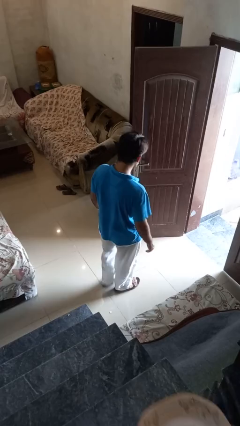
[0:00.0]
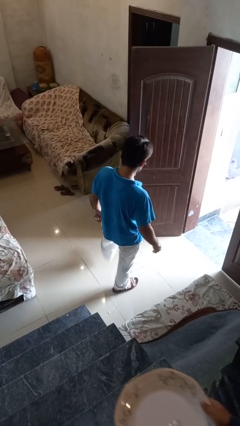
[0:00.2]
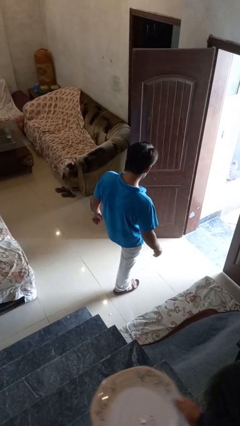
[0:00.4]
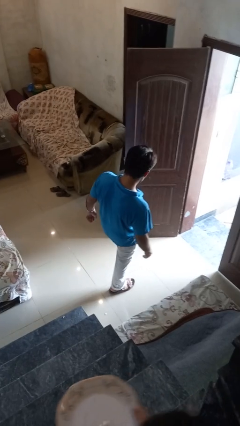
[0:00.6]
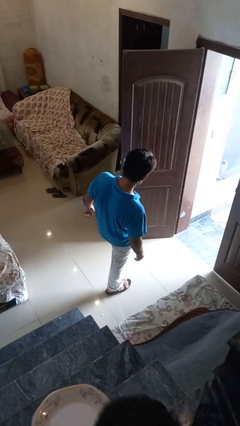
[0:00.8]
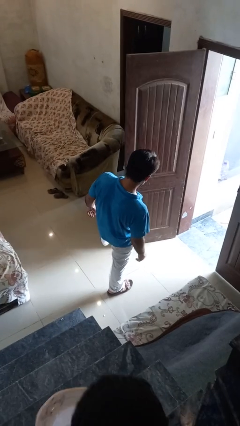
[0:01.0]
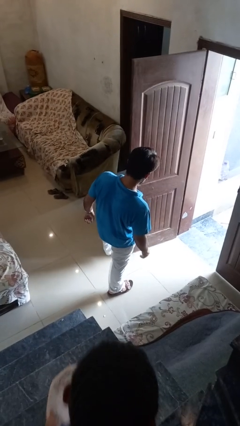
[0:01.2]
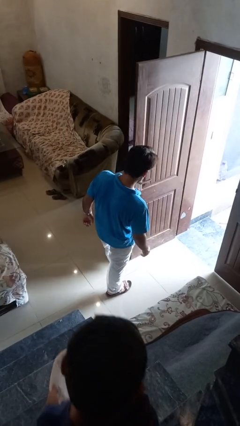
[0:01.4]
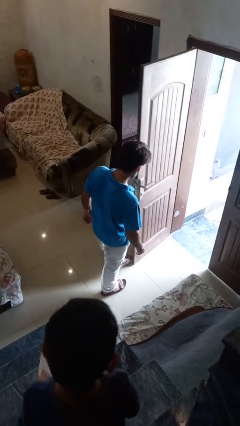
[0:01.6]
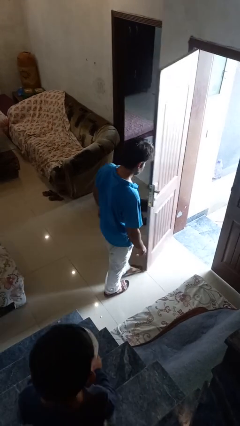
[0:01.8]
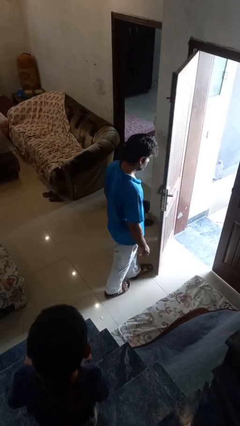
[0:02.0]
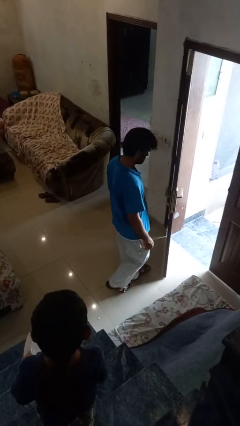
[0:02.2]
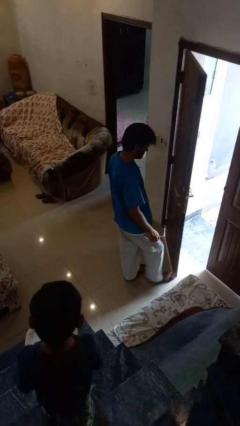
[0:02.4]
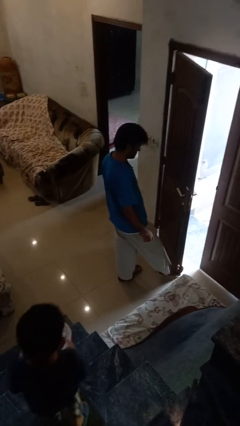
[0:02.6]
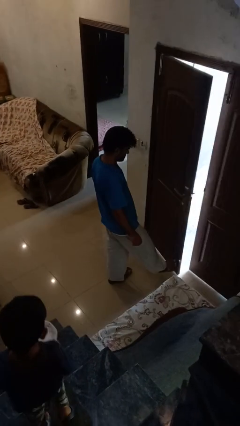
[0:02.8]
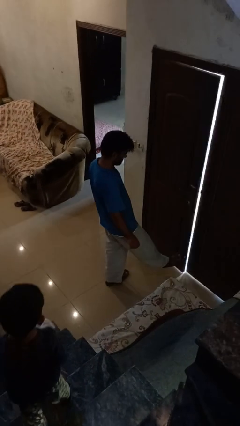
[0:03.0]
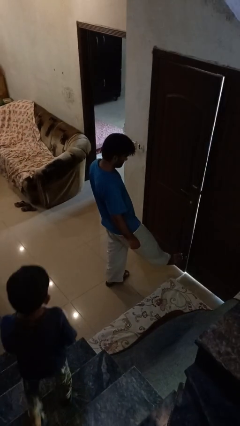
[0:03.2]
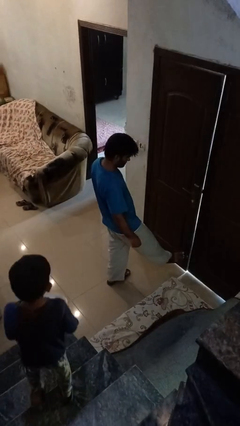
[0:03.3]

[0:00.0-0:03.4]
person closes door with foot

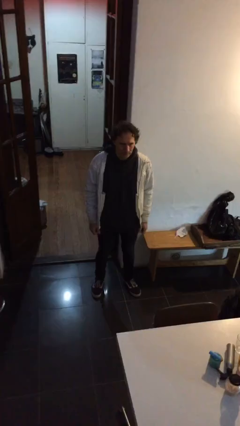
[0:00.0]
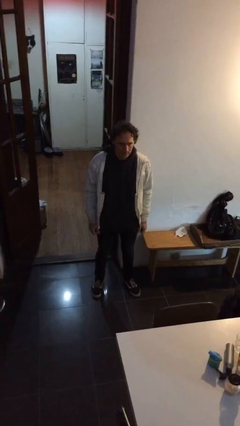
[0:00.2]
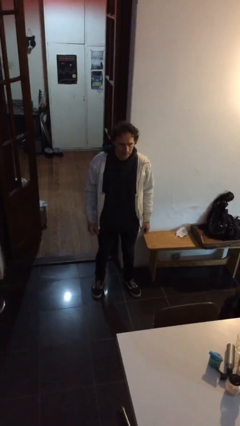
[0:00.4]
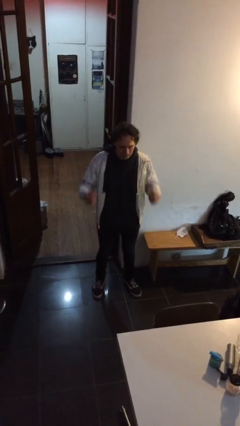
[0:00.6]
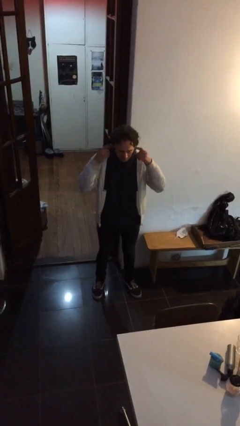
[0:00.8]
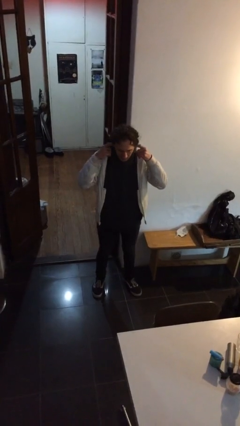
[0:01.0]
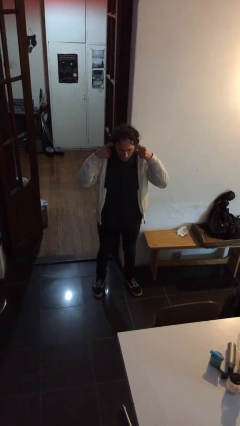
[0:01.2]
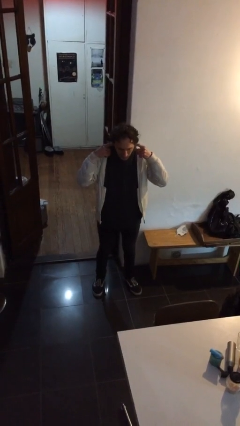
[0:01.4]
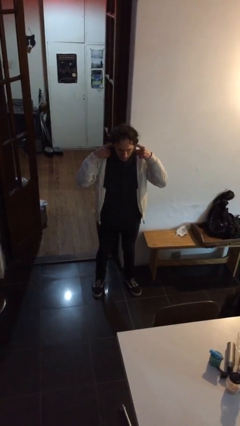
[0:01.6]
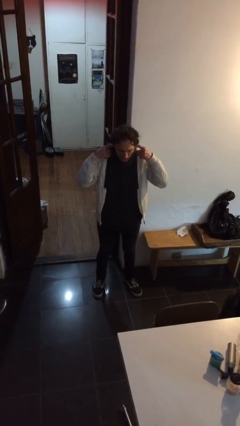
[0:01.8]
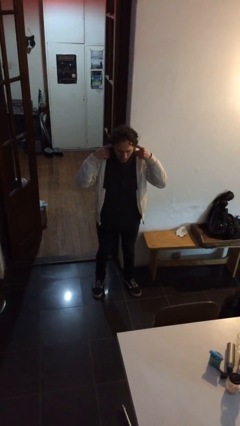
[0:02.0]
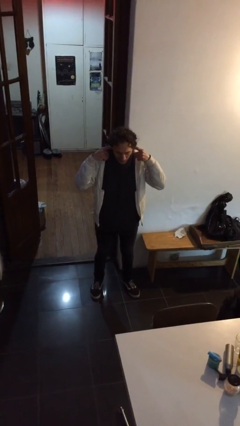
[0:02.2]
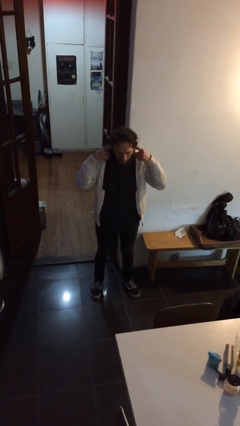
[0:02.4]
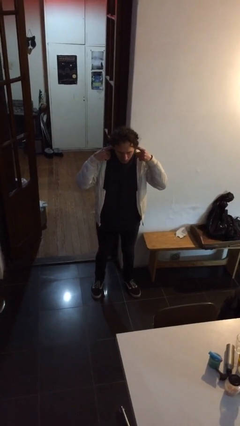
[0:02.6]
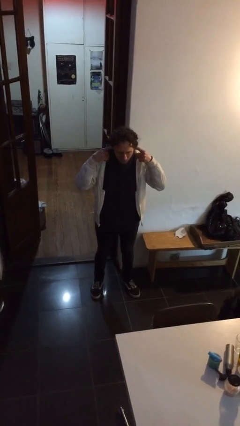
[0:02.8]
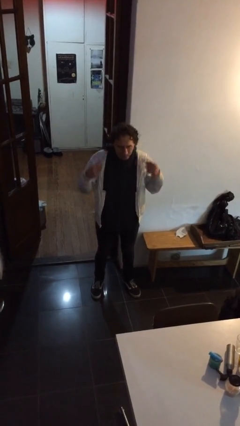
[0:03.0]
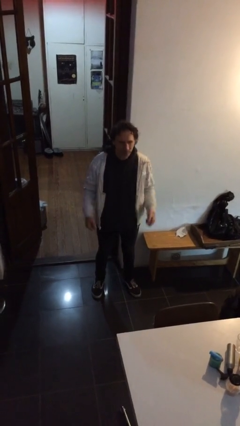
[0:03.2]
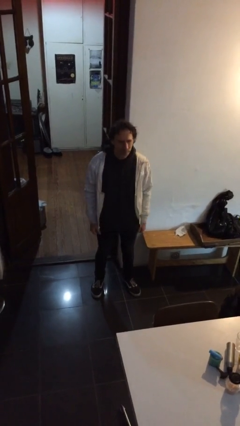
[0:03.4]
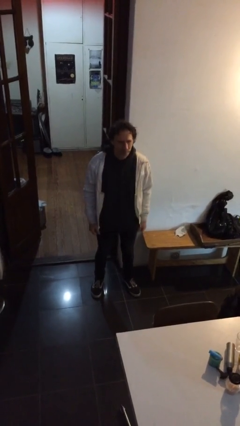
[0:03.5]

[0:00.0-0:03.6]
person puts fingers in ear

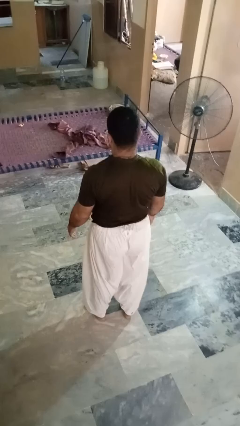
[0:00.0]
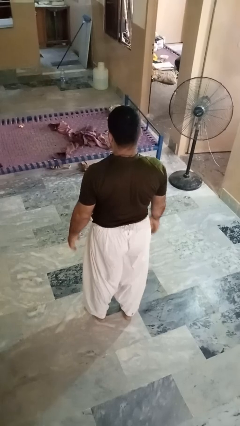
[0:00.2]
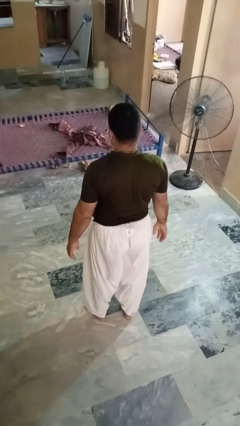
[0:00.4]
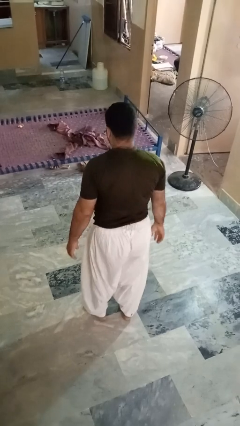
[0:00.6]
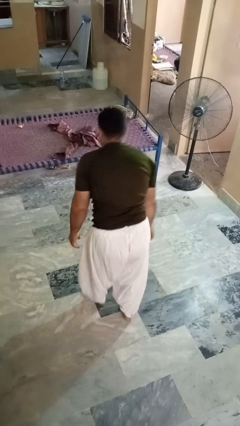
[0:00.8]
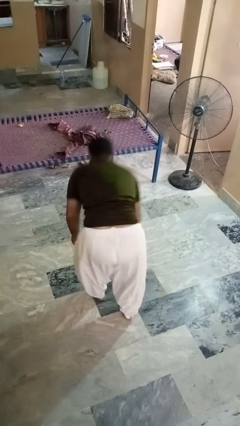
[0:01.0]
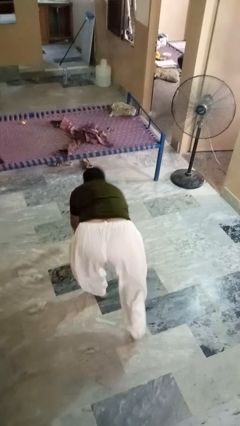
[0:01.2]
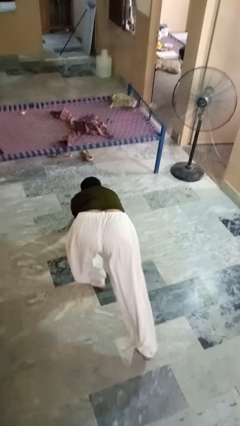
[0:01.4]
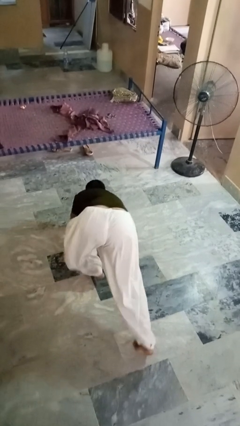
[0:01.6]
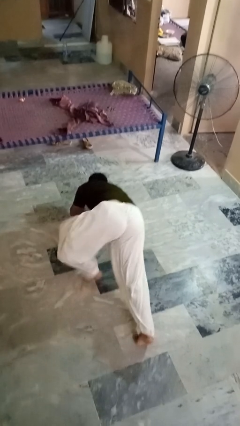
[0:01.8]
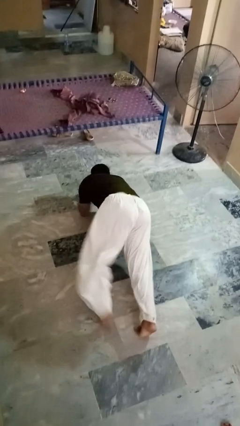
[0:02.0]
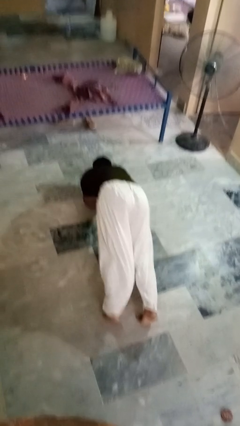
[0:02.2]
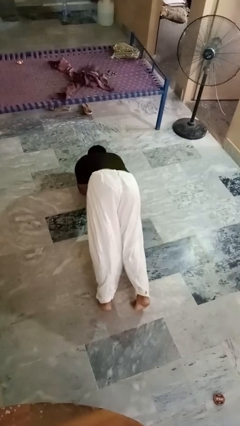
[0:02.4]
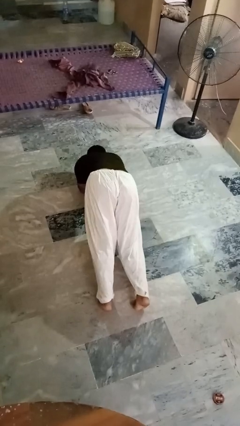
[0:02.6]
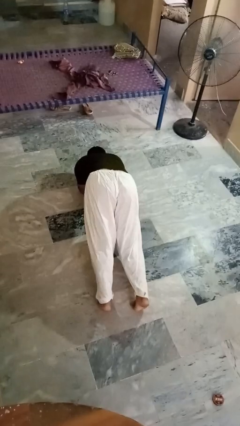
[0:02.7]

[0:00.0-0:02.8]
person exercises with plank

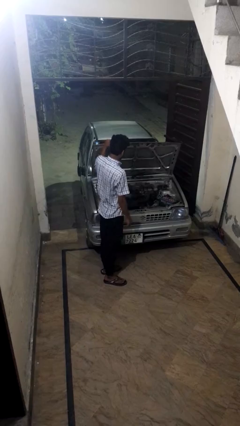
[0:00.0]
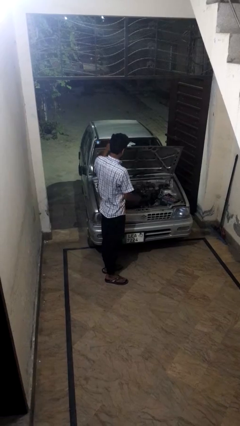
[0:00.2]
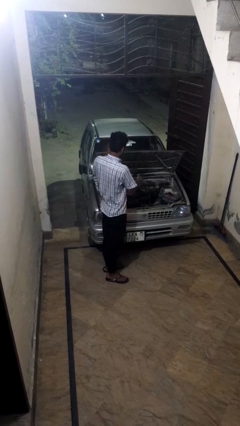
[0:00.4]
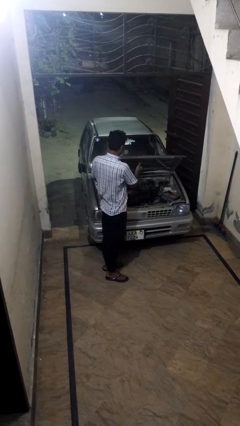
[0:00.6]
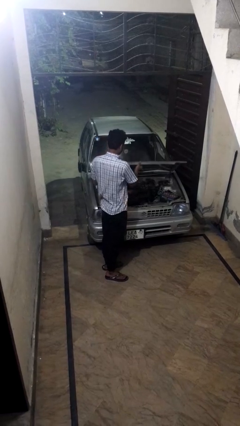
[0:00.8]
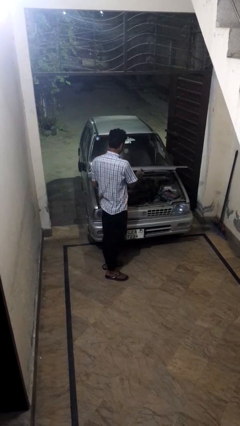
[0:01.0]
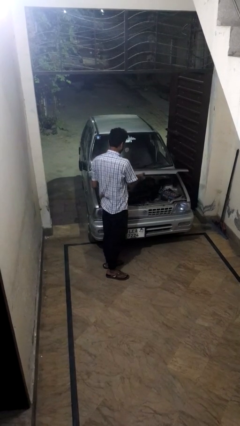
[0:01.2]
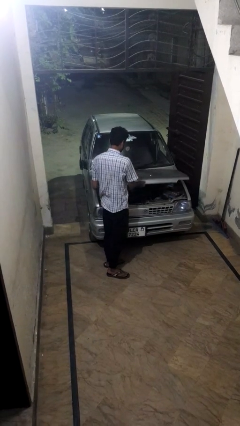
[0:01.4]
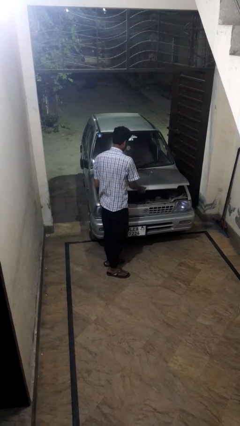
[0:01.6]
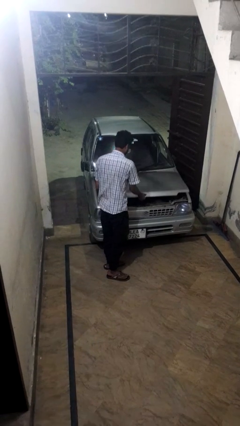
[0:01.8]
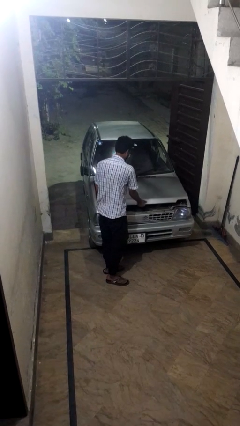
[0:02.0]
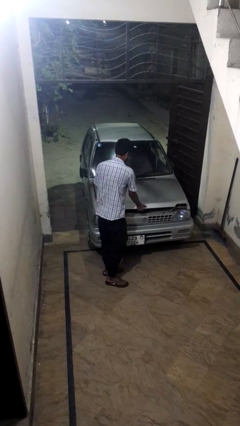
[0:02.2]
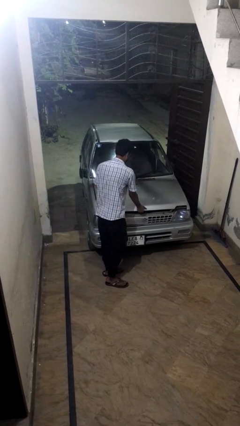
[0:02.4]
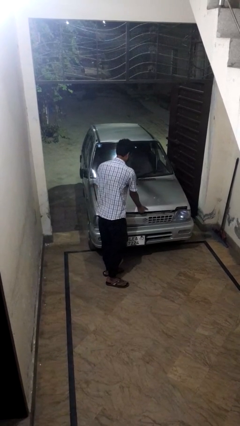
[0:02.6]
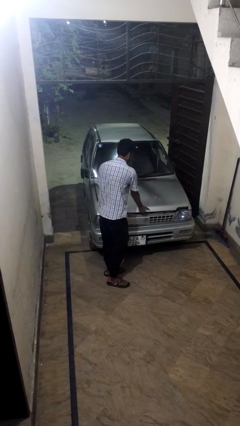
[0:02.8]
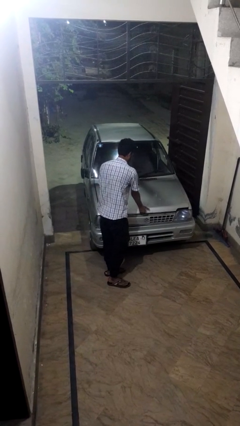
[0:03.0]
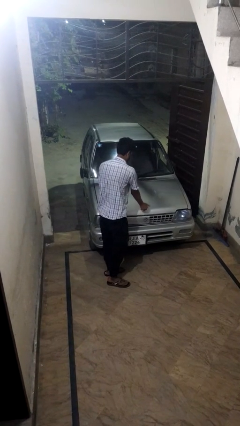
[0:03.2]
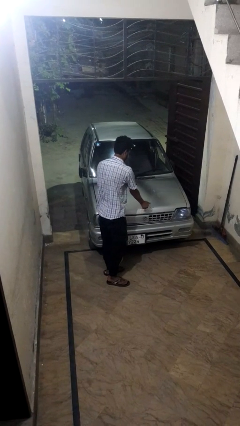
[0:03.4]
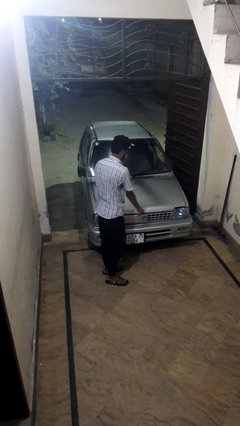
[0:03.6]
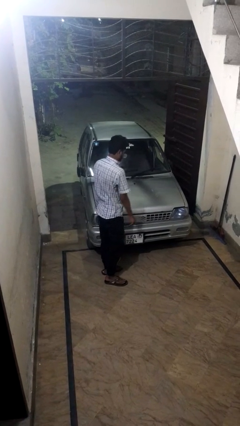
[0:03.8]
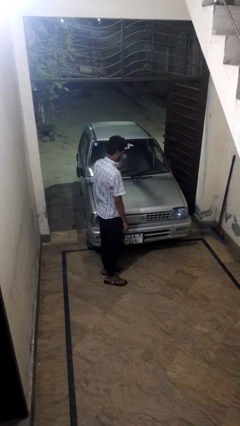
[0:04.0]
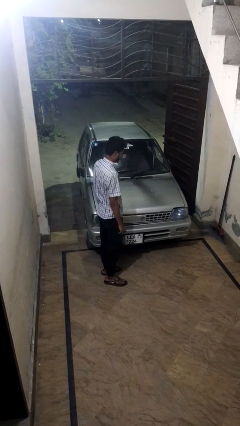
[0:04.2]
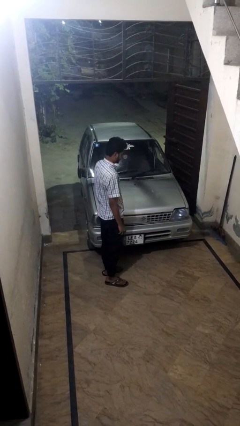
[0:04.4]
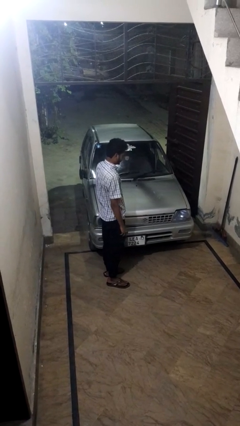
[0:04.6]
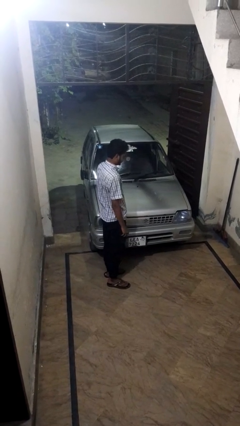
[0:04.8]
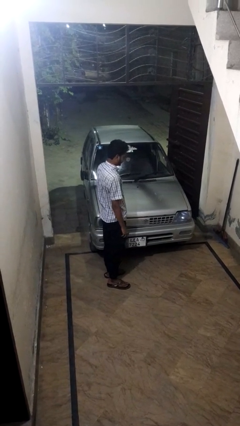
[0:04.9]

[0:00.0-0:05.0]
person closes car hood

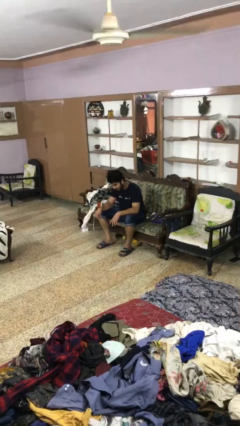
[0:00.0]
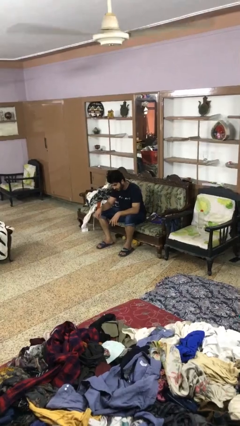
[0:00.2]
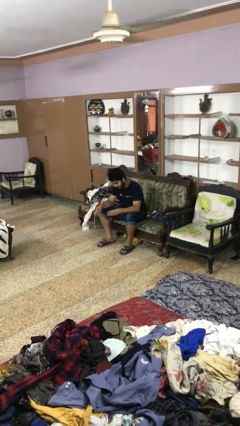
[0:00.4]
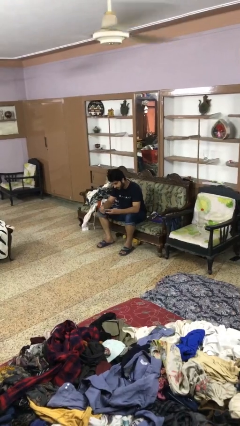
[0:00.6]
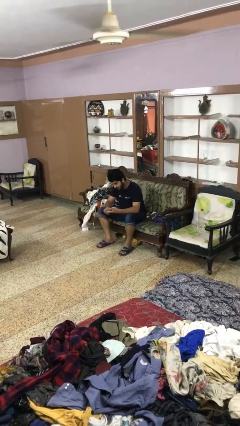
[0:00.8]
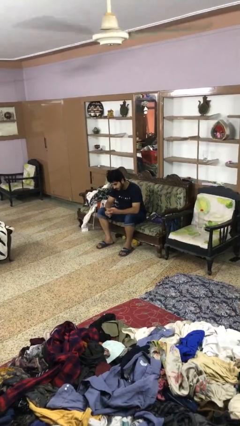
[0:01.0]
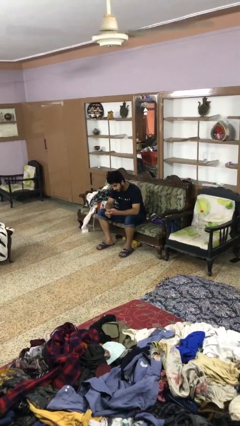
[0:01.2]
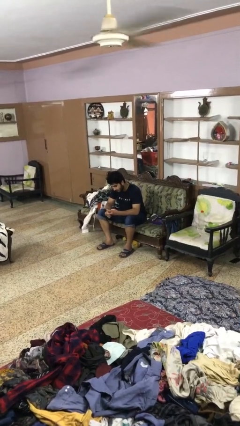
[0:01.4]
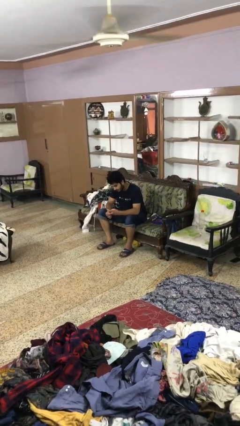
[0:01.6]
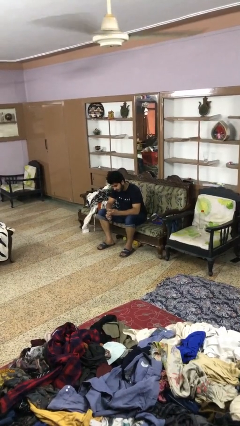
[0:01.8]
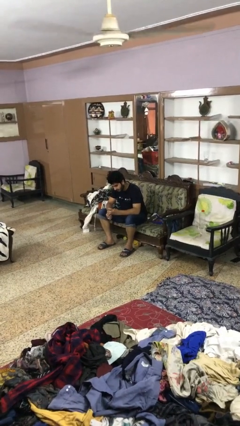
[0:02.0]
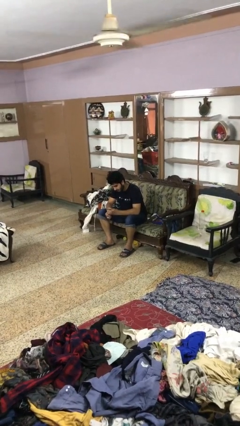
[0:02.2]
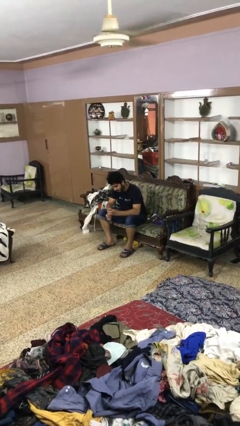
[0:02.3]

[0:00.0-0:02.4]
person files fingernails

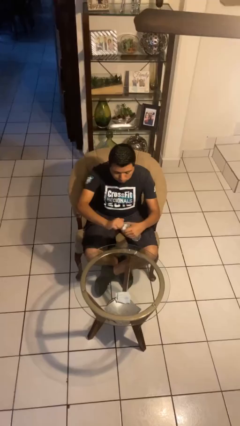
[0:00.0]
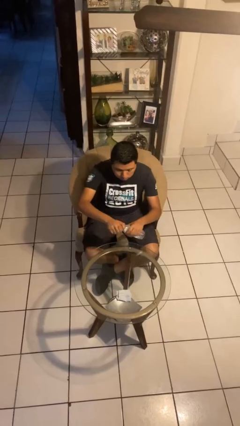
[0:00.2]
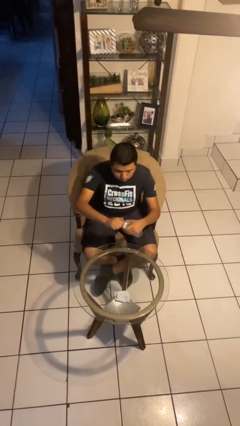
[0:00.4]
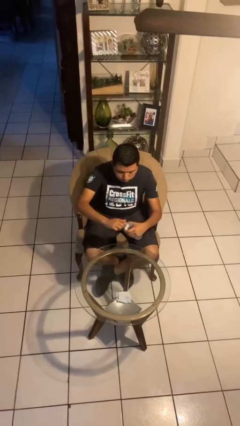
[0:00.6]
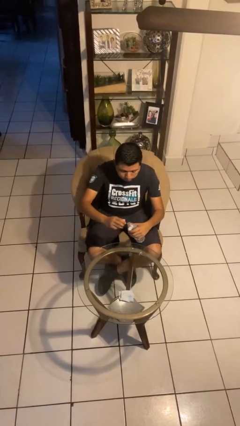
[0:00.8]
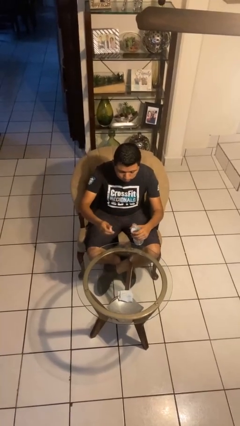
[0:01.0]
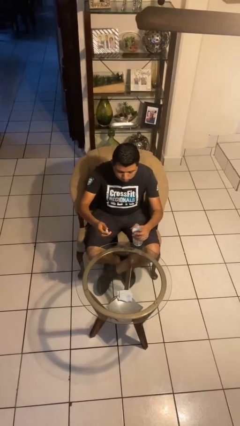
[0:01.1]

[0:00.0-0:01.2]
person unscrews lid from bottle
